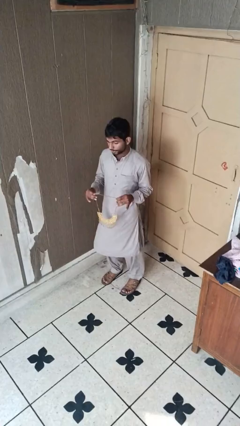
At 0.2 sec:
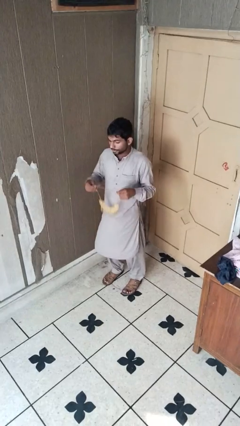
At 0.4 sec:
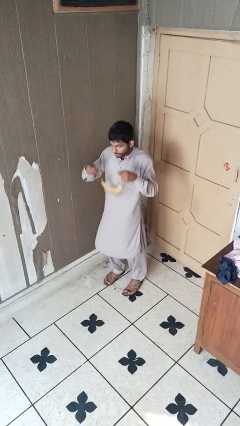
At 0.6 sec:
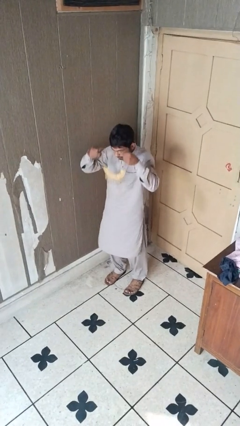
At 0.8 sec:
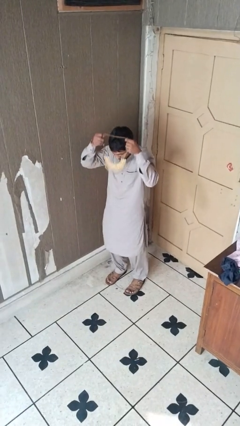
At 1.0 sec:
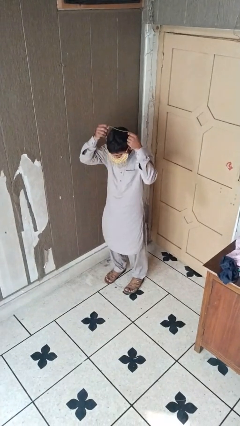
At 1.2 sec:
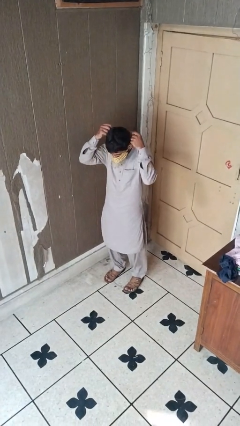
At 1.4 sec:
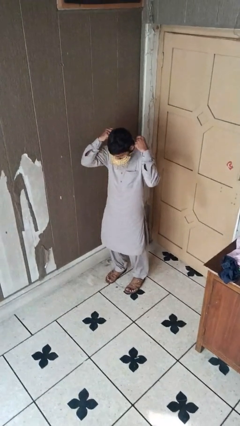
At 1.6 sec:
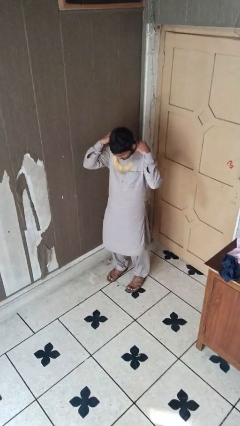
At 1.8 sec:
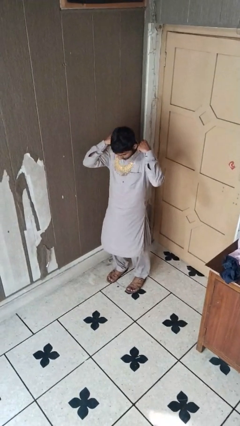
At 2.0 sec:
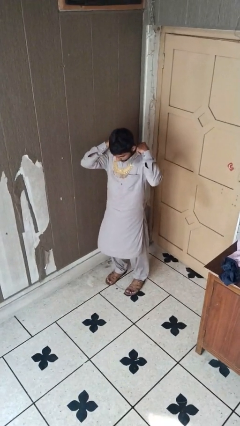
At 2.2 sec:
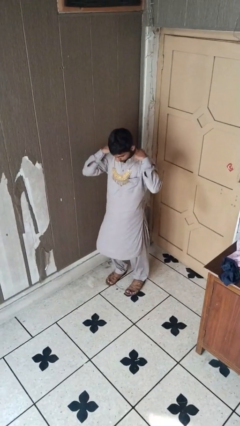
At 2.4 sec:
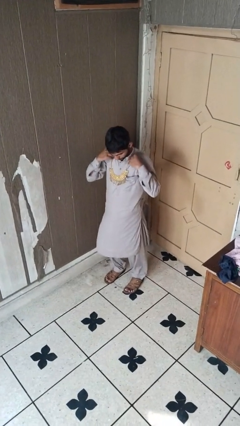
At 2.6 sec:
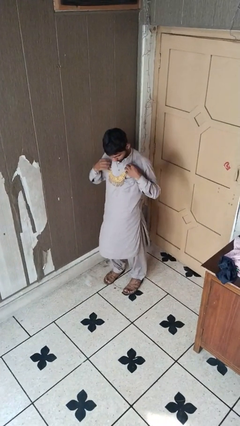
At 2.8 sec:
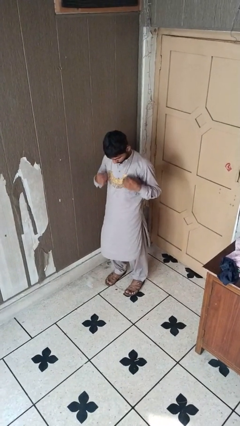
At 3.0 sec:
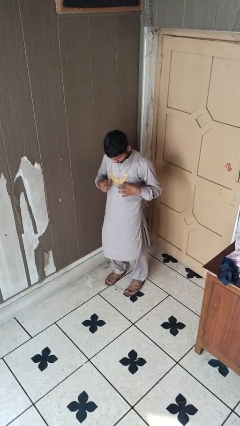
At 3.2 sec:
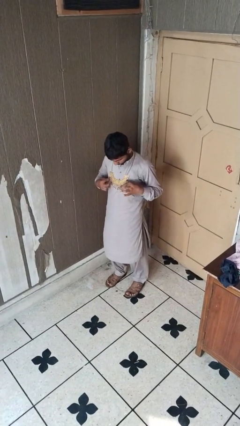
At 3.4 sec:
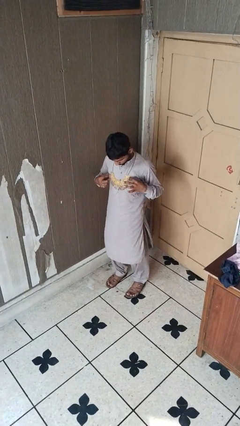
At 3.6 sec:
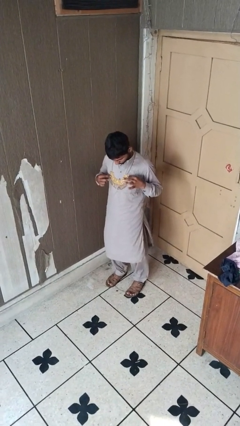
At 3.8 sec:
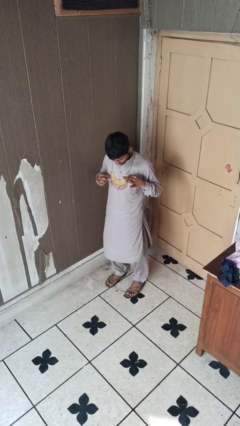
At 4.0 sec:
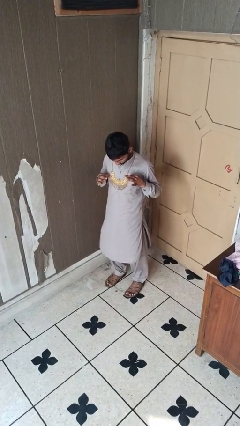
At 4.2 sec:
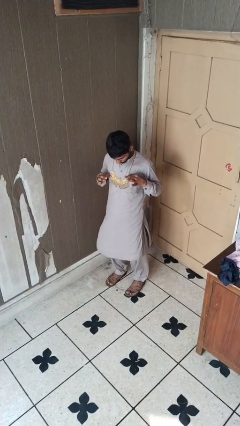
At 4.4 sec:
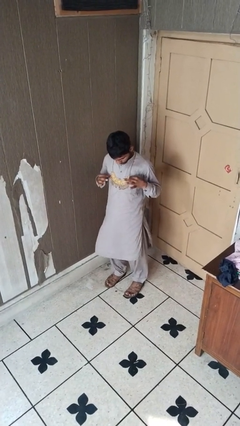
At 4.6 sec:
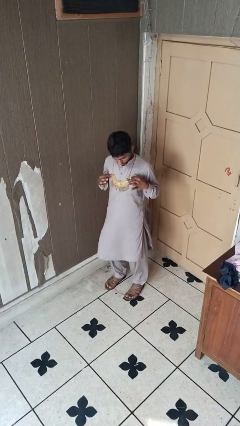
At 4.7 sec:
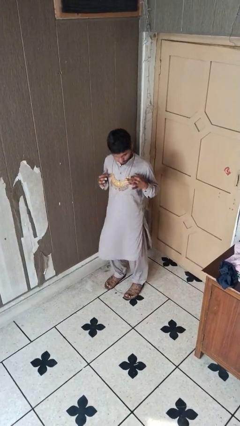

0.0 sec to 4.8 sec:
person puts on necklace

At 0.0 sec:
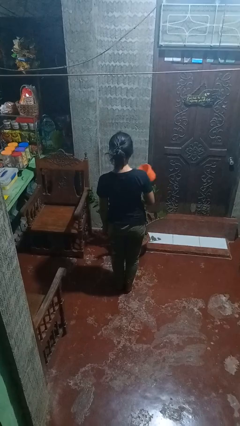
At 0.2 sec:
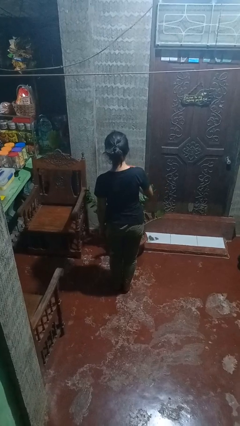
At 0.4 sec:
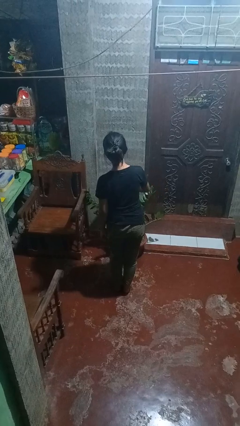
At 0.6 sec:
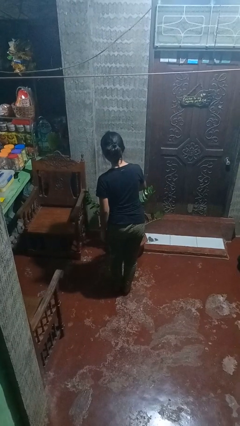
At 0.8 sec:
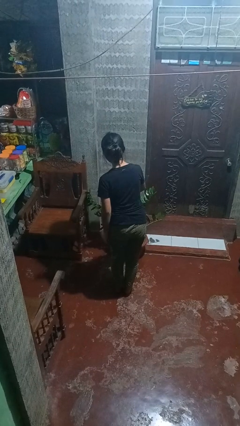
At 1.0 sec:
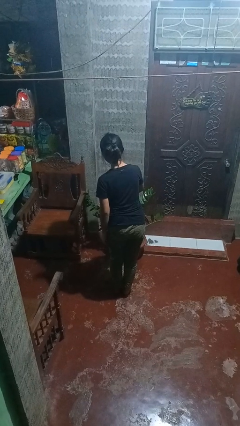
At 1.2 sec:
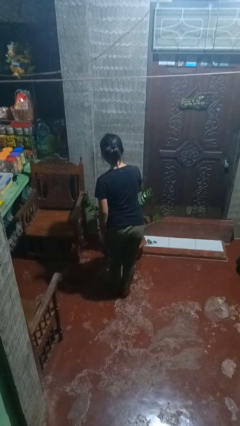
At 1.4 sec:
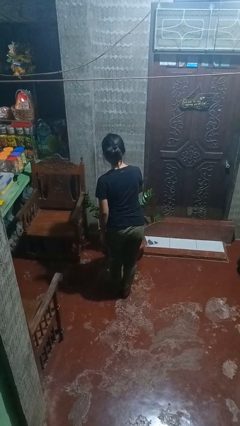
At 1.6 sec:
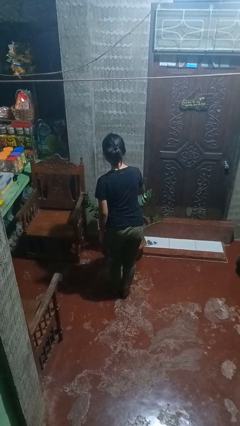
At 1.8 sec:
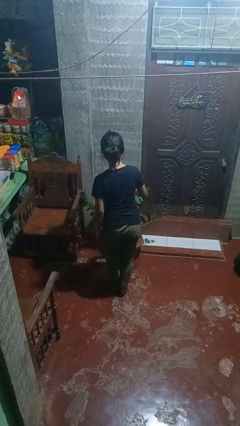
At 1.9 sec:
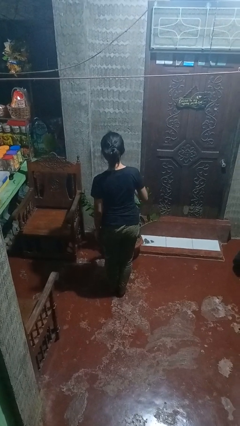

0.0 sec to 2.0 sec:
person waters houseplant

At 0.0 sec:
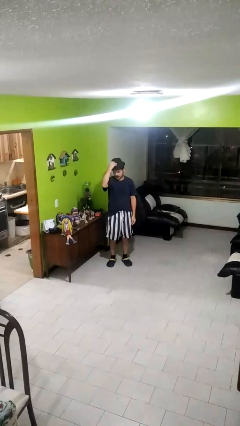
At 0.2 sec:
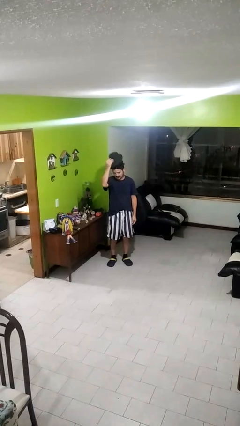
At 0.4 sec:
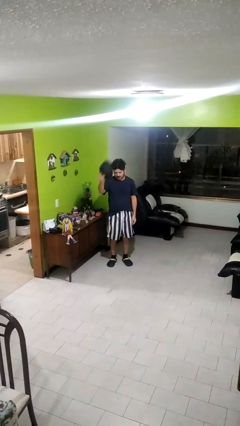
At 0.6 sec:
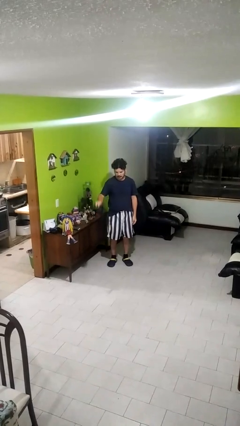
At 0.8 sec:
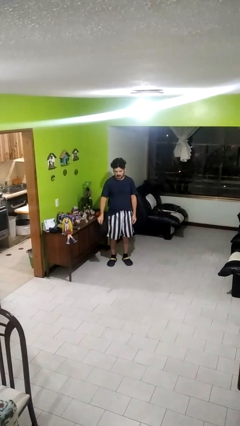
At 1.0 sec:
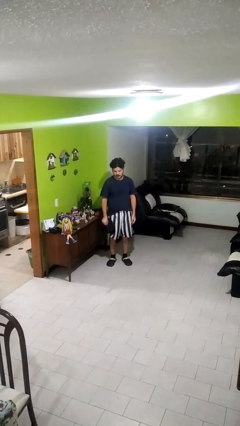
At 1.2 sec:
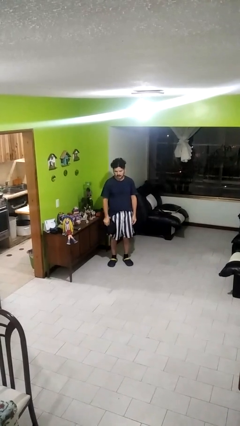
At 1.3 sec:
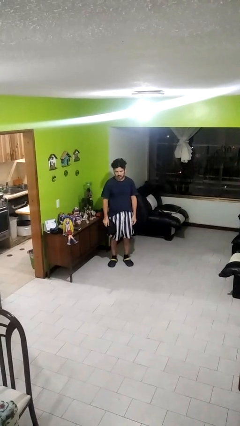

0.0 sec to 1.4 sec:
person takes off hat

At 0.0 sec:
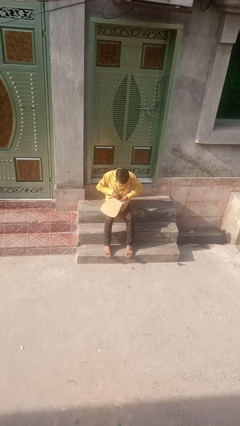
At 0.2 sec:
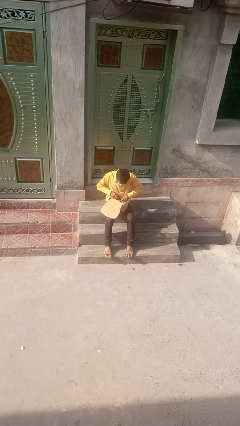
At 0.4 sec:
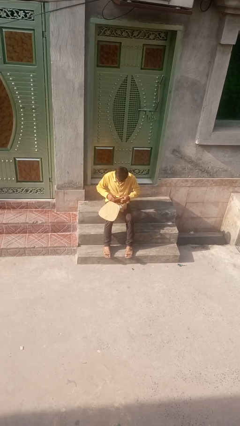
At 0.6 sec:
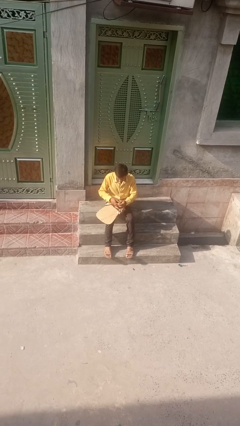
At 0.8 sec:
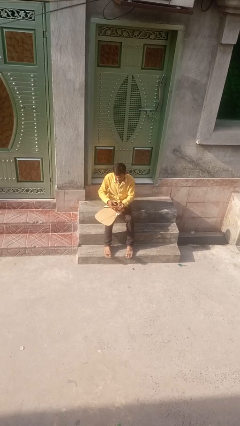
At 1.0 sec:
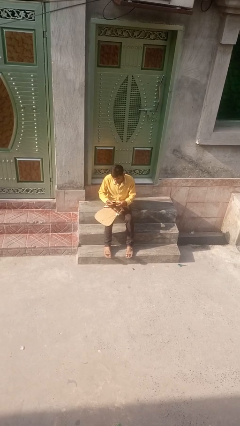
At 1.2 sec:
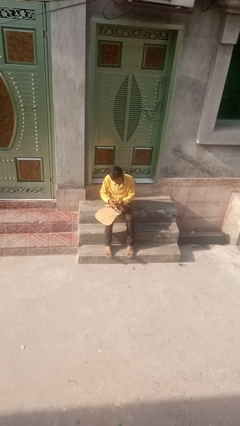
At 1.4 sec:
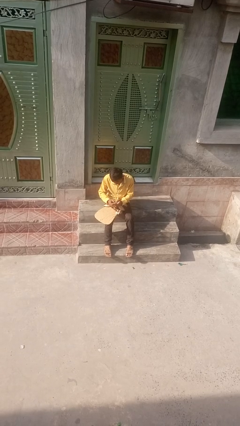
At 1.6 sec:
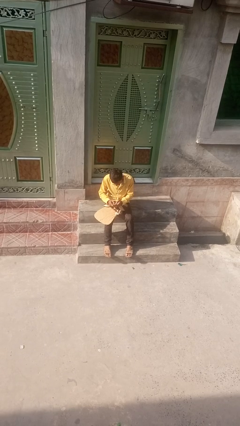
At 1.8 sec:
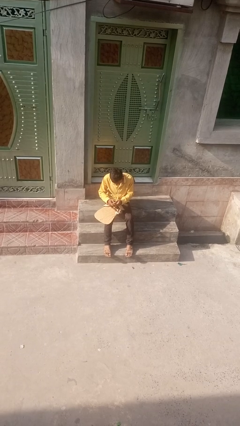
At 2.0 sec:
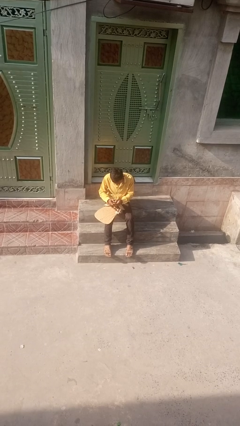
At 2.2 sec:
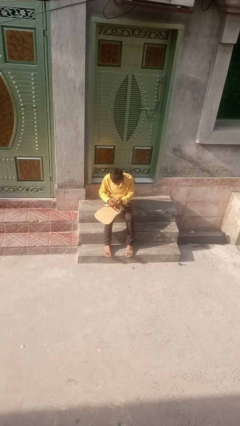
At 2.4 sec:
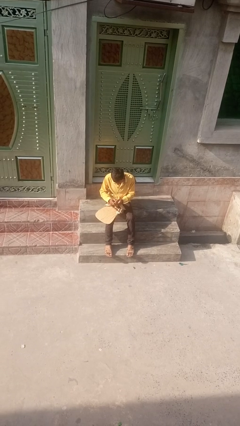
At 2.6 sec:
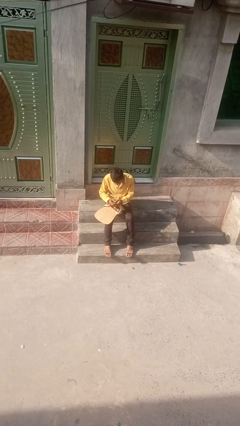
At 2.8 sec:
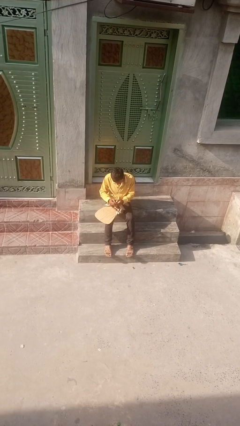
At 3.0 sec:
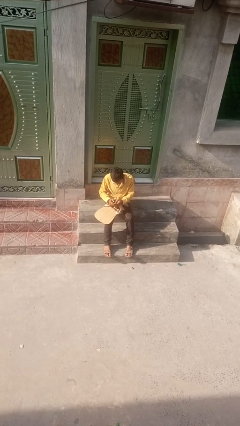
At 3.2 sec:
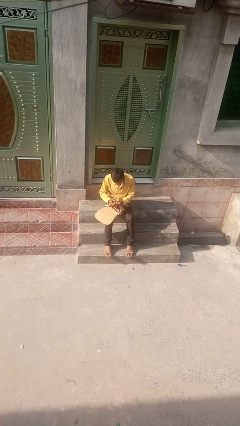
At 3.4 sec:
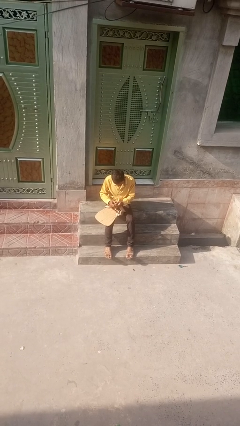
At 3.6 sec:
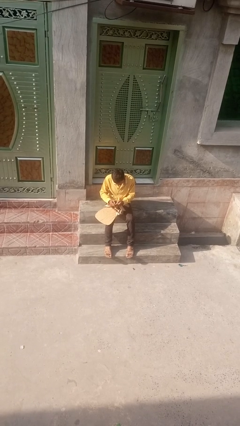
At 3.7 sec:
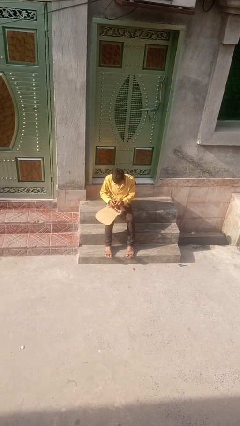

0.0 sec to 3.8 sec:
person takes object from backpack

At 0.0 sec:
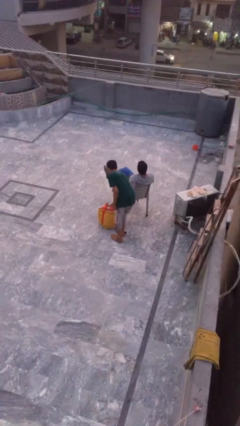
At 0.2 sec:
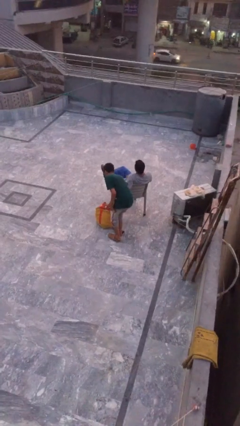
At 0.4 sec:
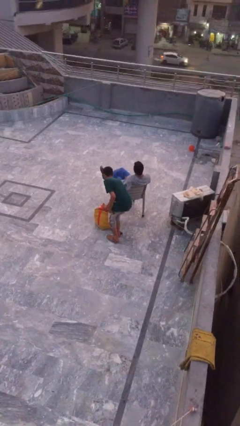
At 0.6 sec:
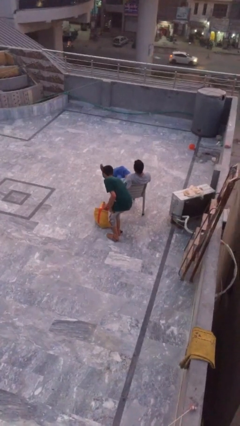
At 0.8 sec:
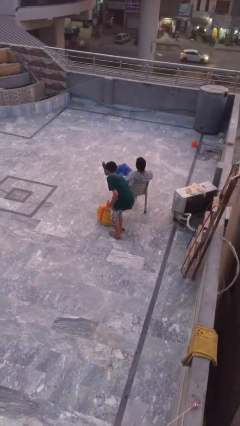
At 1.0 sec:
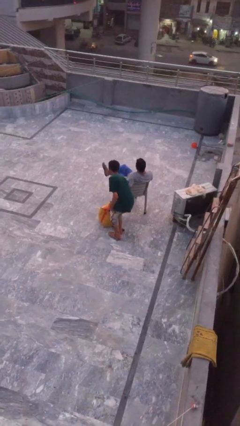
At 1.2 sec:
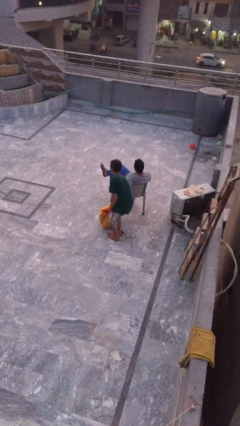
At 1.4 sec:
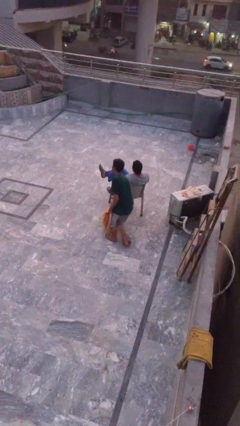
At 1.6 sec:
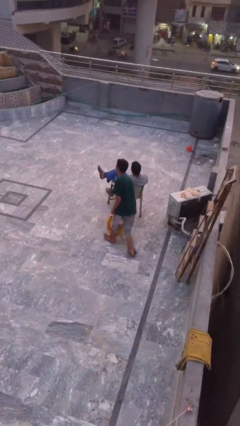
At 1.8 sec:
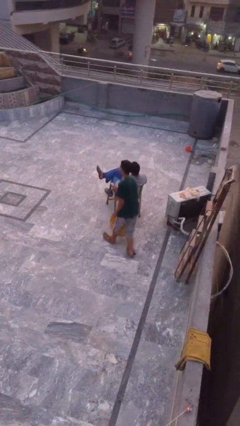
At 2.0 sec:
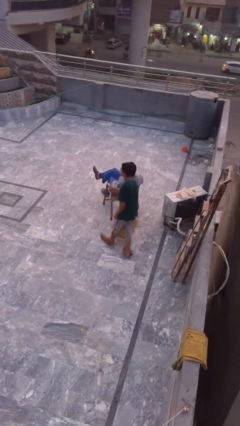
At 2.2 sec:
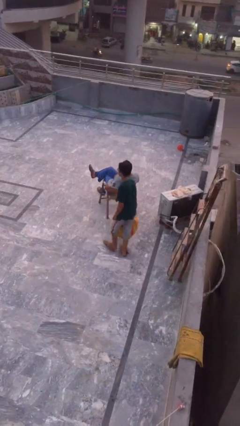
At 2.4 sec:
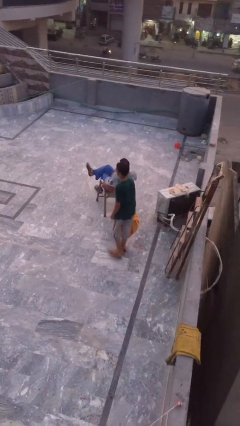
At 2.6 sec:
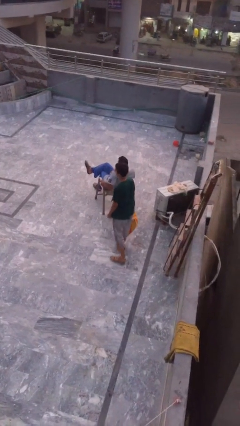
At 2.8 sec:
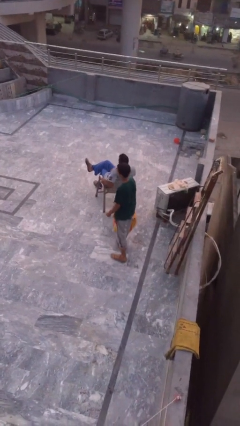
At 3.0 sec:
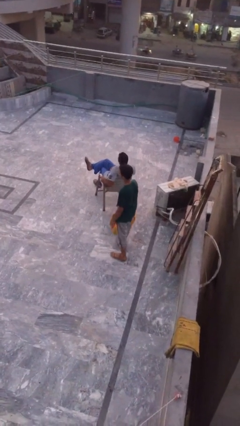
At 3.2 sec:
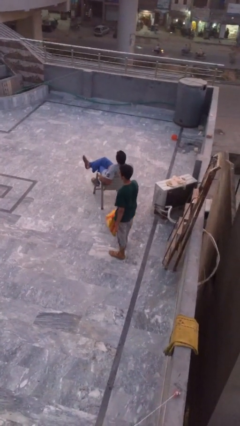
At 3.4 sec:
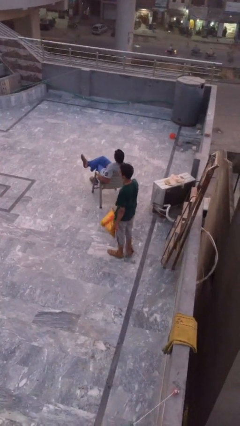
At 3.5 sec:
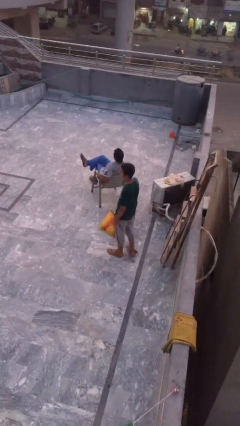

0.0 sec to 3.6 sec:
person steals object from person

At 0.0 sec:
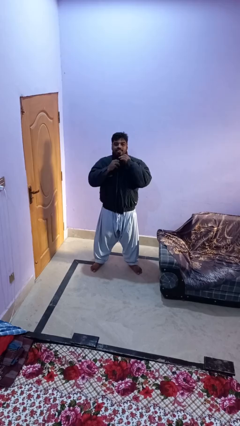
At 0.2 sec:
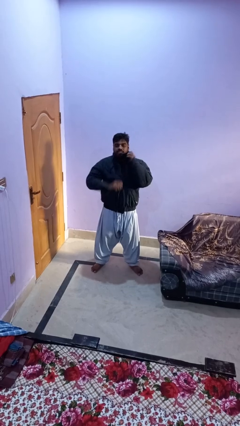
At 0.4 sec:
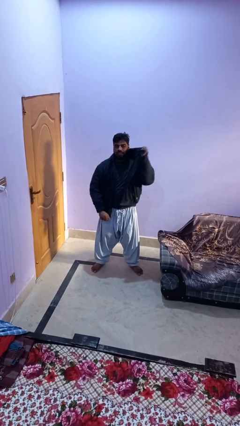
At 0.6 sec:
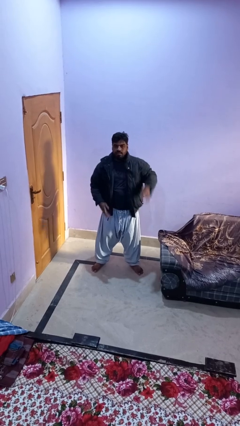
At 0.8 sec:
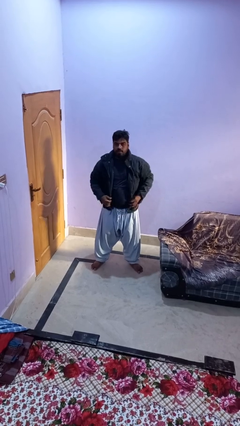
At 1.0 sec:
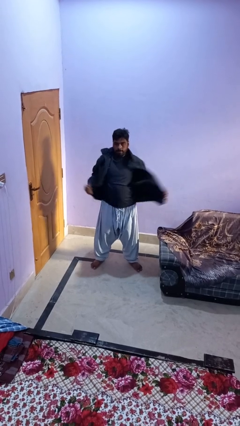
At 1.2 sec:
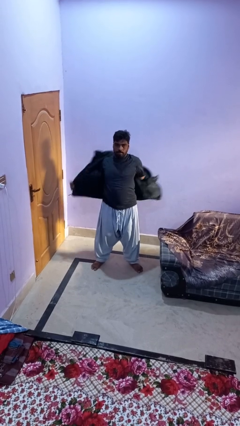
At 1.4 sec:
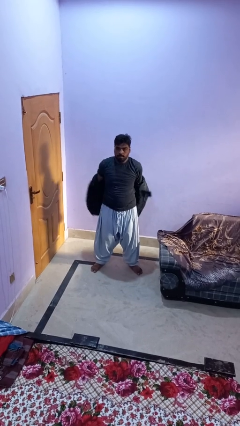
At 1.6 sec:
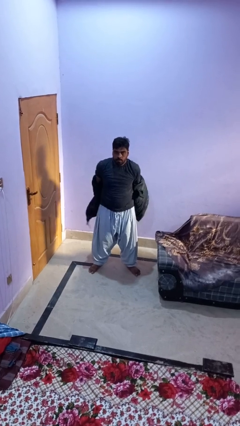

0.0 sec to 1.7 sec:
person unzips jacket
